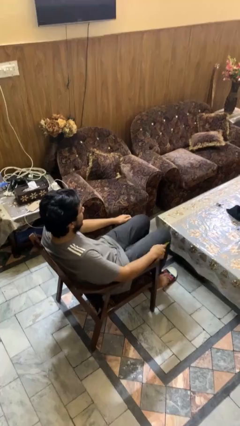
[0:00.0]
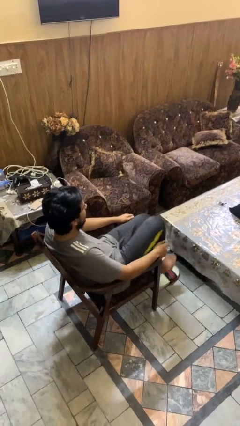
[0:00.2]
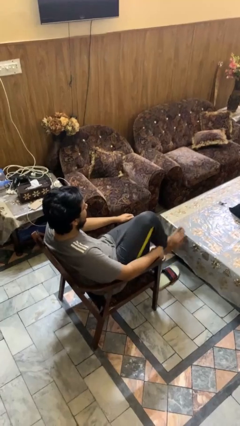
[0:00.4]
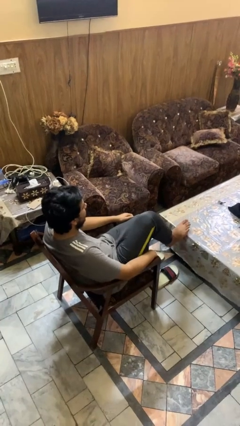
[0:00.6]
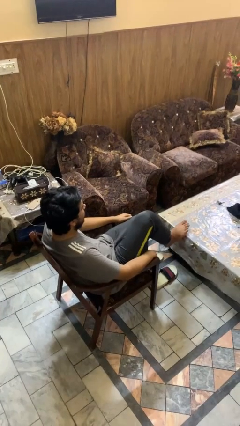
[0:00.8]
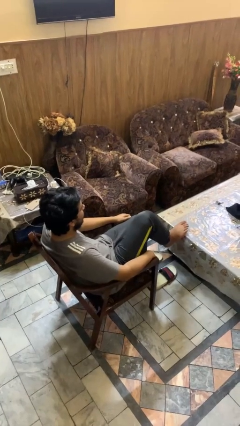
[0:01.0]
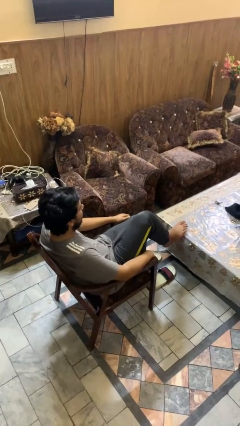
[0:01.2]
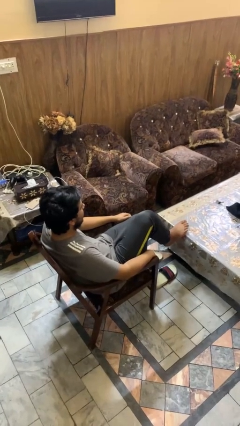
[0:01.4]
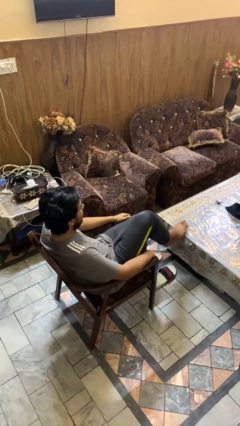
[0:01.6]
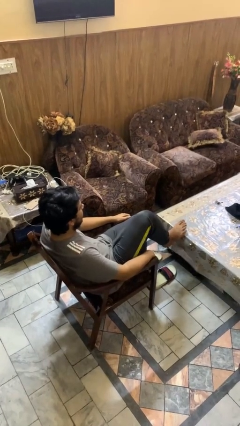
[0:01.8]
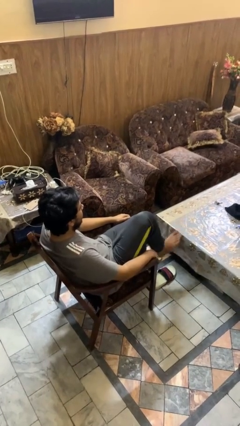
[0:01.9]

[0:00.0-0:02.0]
person puts feet up

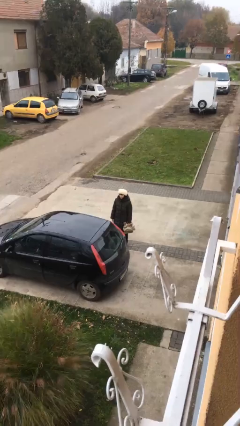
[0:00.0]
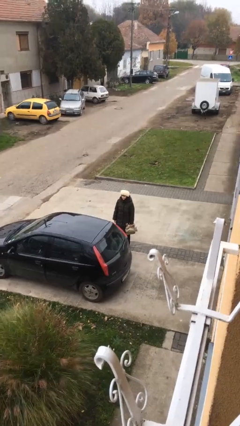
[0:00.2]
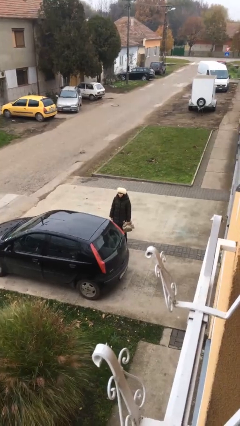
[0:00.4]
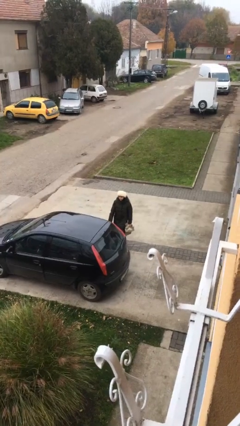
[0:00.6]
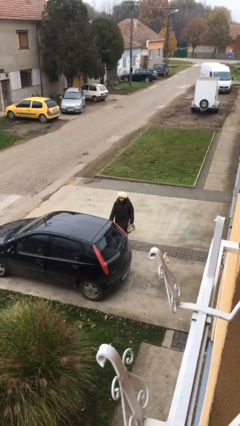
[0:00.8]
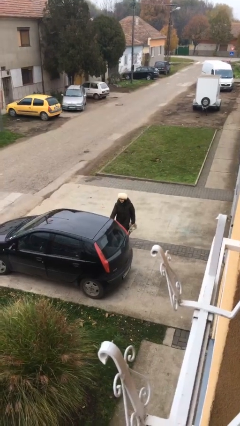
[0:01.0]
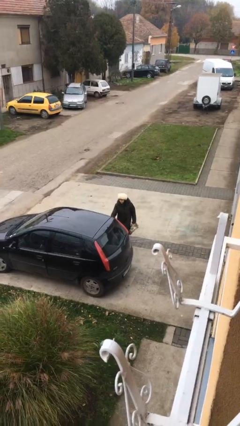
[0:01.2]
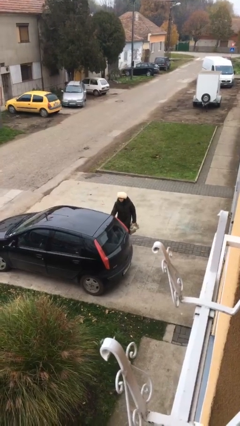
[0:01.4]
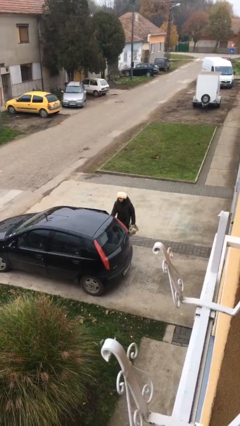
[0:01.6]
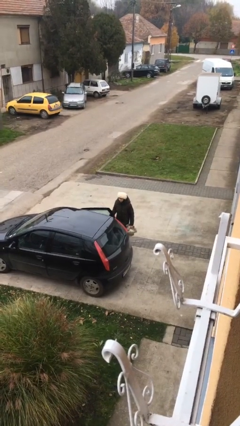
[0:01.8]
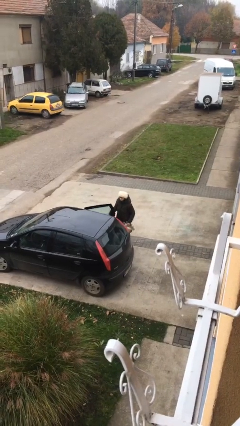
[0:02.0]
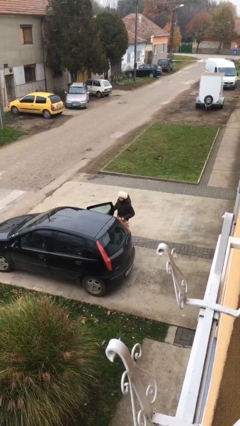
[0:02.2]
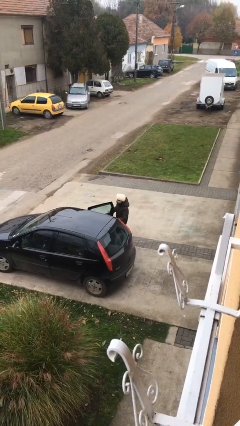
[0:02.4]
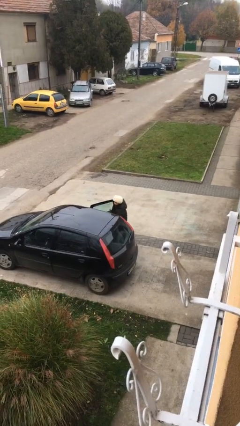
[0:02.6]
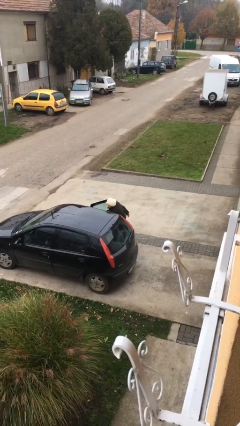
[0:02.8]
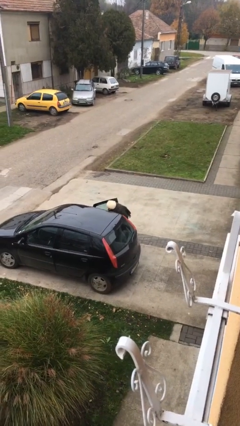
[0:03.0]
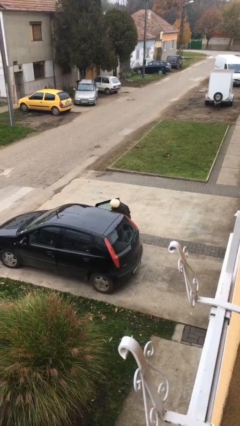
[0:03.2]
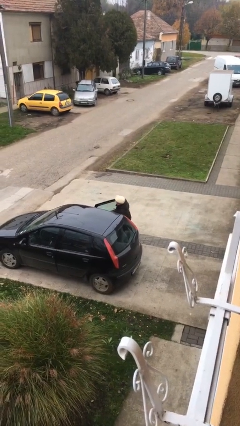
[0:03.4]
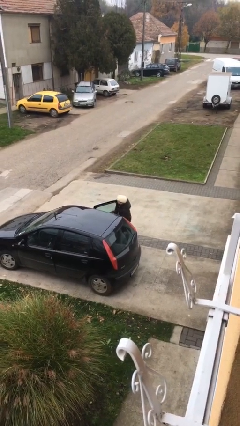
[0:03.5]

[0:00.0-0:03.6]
person loads car

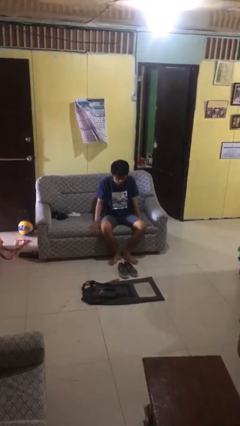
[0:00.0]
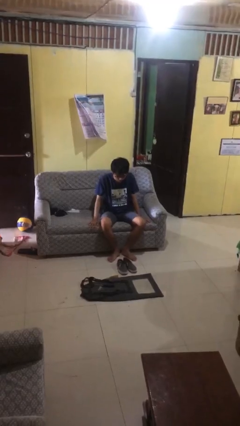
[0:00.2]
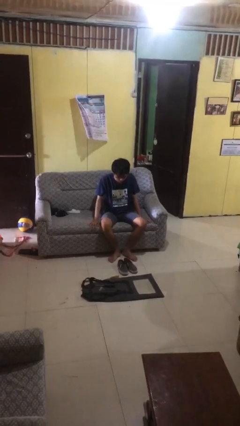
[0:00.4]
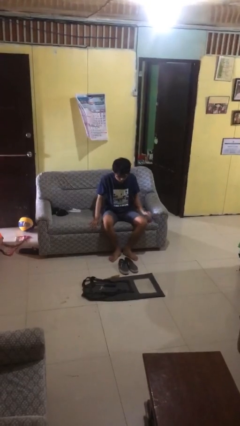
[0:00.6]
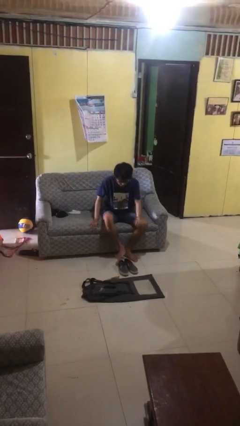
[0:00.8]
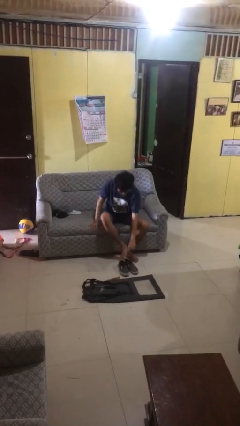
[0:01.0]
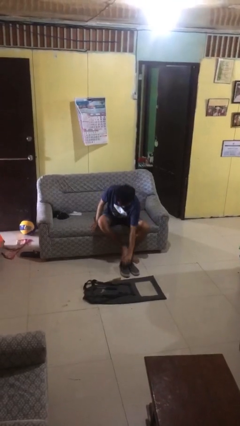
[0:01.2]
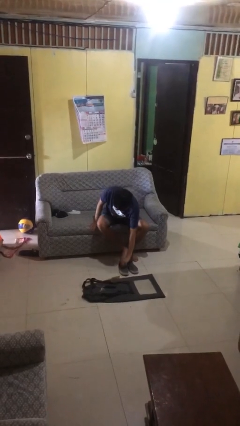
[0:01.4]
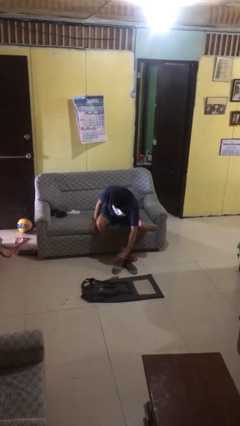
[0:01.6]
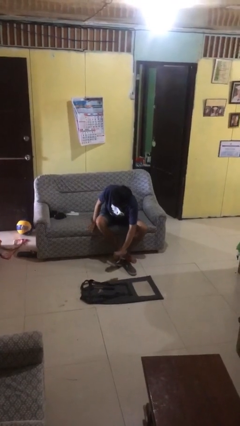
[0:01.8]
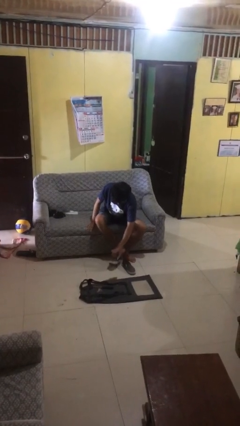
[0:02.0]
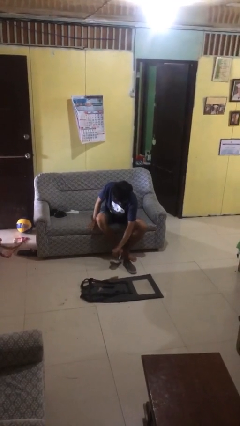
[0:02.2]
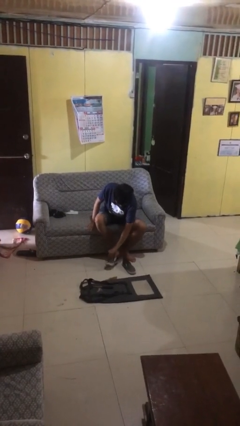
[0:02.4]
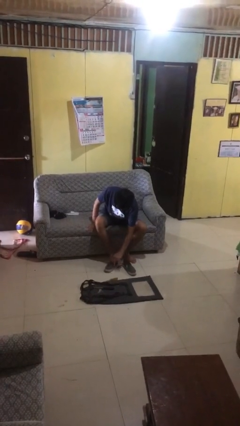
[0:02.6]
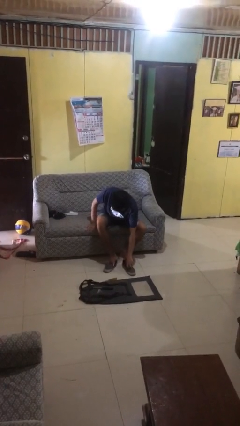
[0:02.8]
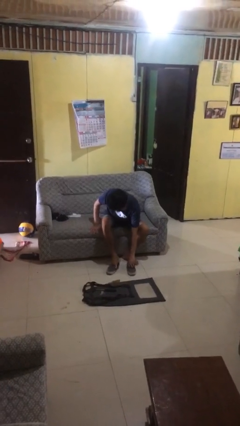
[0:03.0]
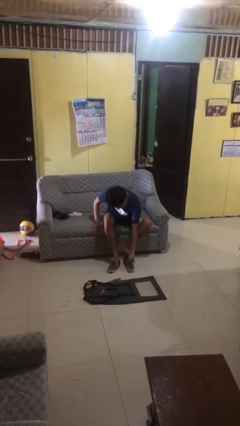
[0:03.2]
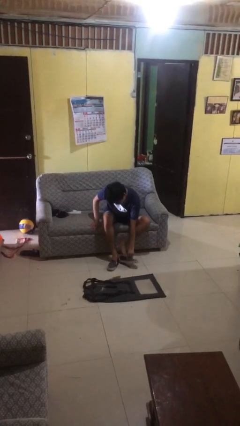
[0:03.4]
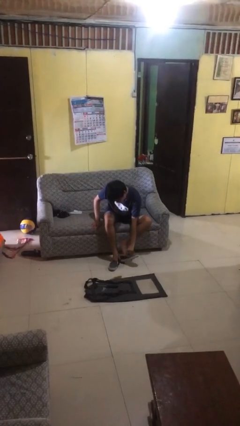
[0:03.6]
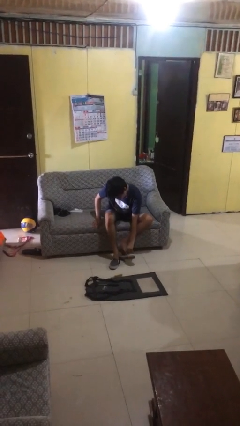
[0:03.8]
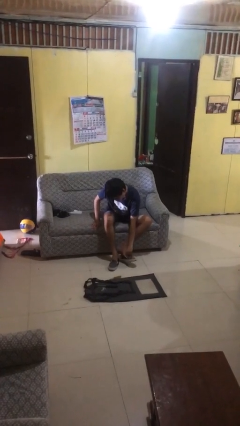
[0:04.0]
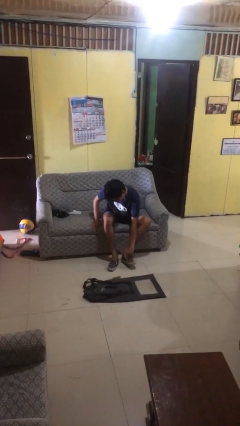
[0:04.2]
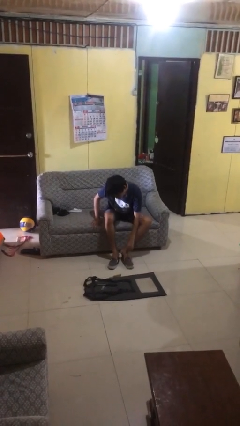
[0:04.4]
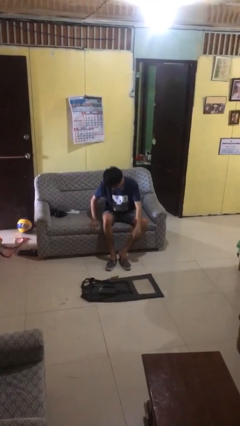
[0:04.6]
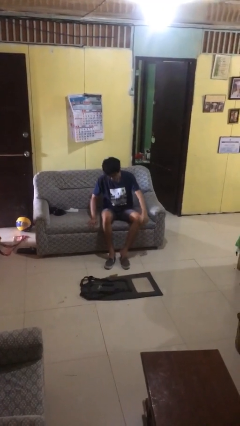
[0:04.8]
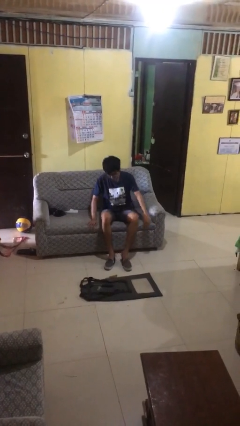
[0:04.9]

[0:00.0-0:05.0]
person puts on shoes

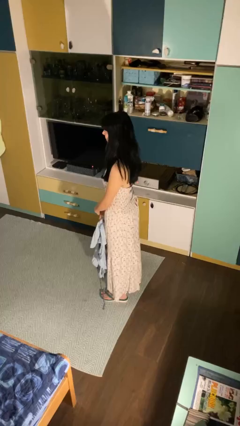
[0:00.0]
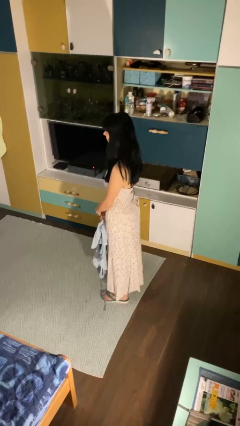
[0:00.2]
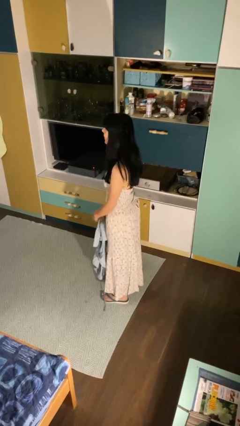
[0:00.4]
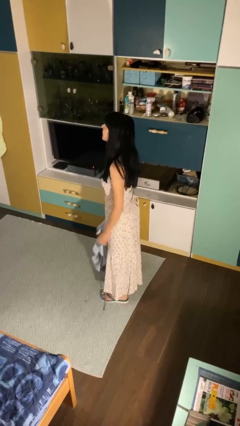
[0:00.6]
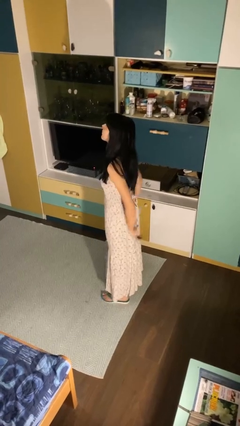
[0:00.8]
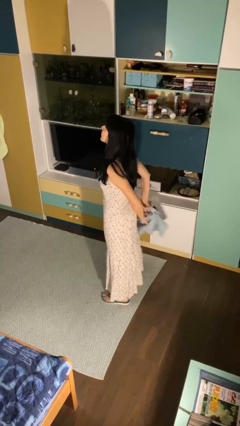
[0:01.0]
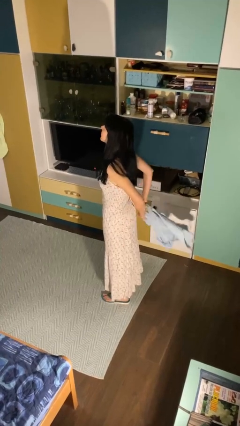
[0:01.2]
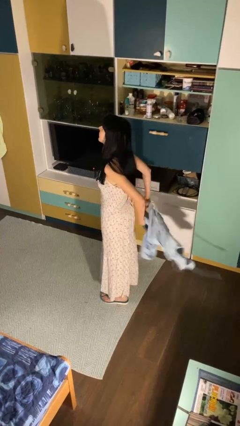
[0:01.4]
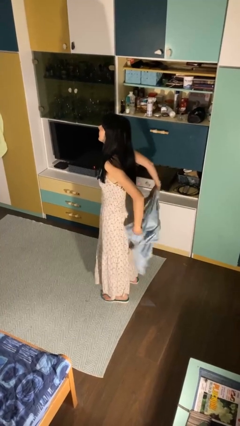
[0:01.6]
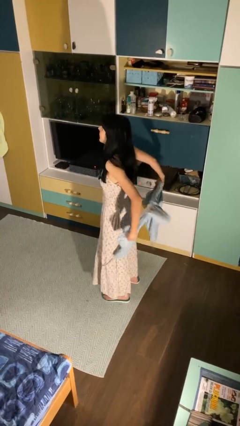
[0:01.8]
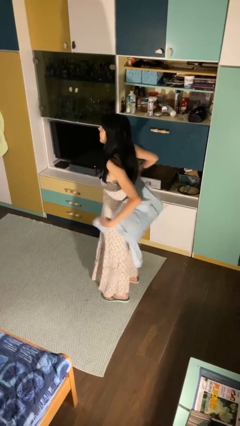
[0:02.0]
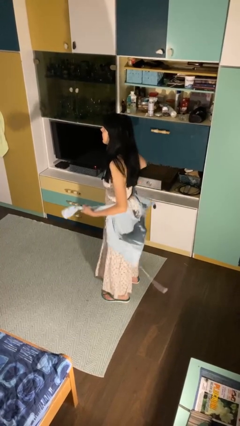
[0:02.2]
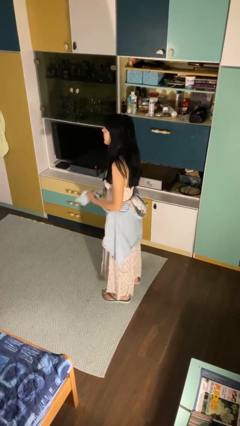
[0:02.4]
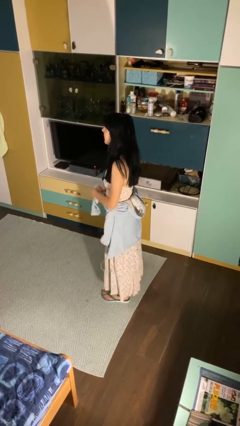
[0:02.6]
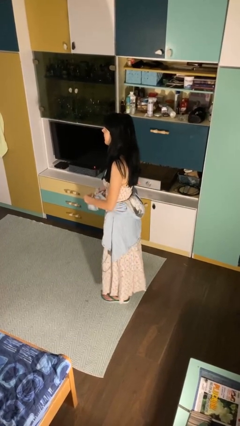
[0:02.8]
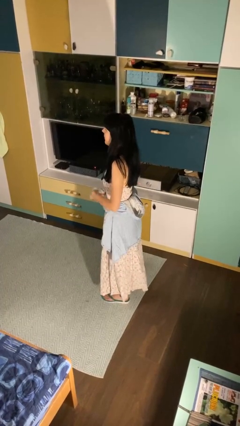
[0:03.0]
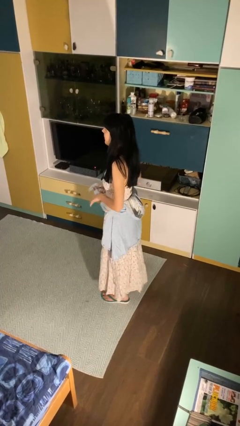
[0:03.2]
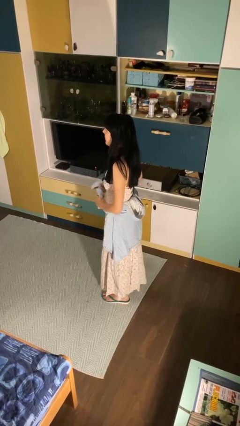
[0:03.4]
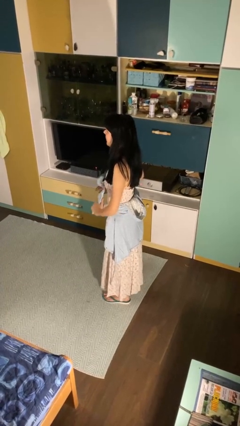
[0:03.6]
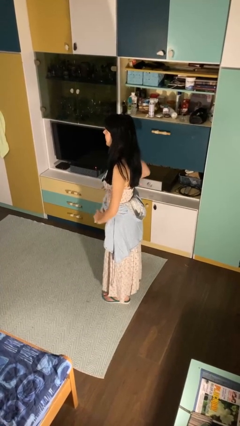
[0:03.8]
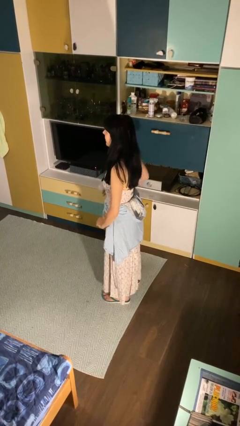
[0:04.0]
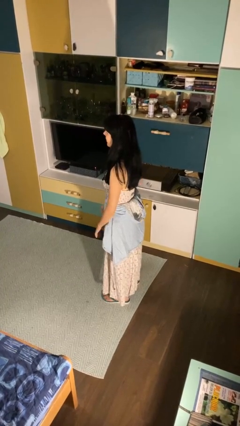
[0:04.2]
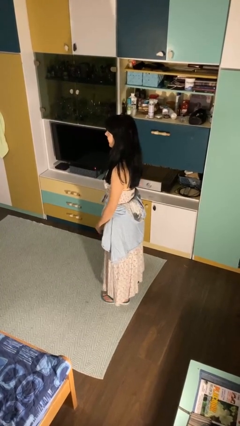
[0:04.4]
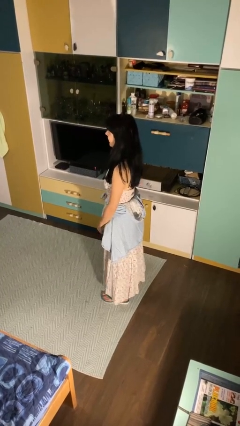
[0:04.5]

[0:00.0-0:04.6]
person ties jacket around waist

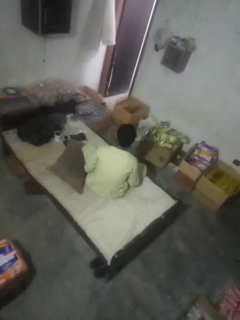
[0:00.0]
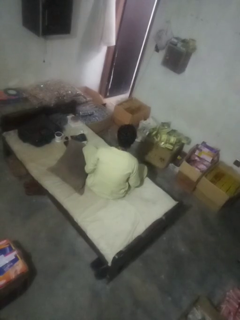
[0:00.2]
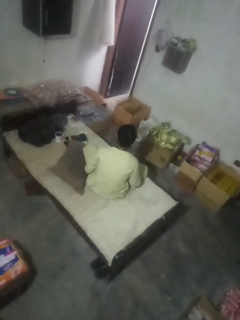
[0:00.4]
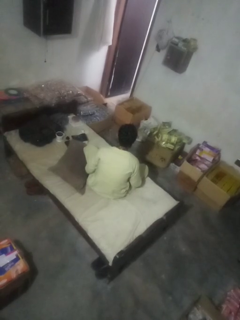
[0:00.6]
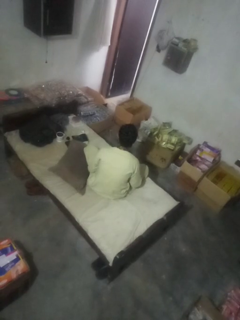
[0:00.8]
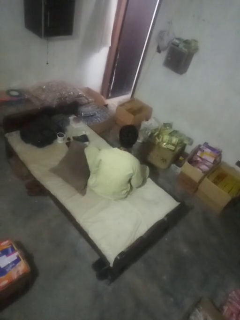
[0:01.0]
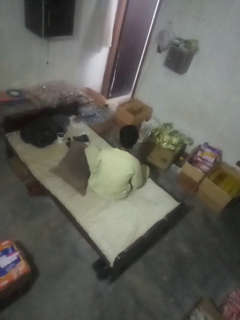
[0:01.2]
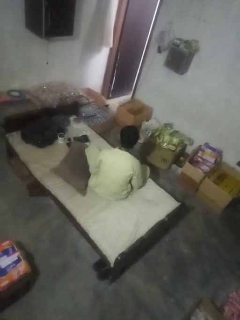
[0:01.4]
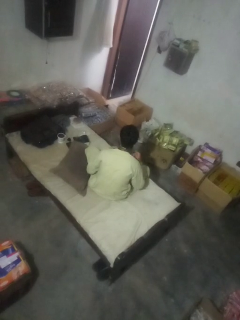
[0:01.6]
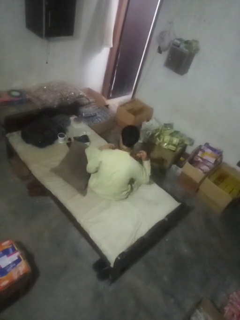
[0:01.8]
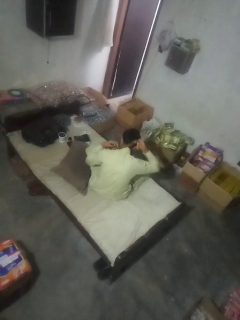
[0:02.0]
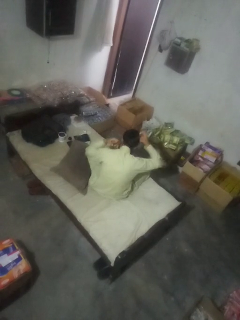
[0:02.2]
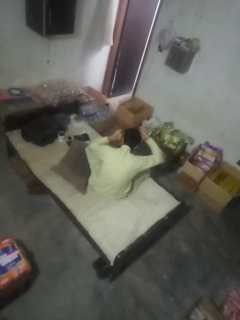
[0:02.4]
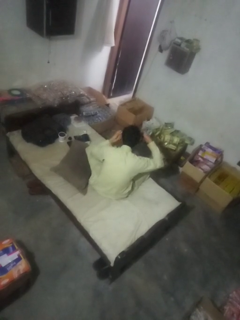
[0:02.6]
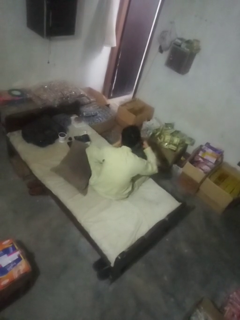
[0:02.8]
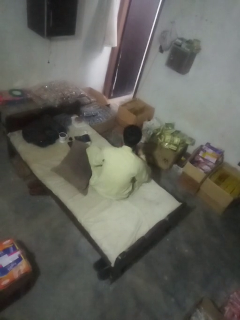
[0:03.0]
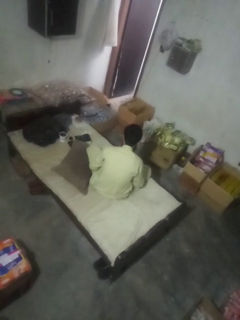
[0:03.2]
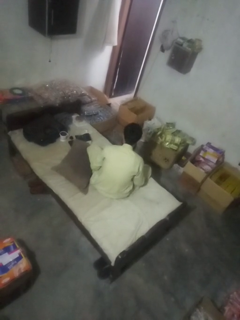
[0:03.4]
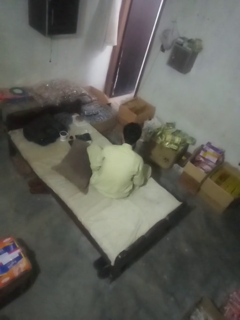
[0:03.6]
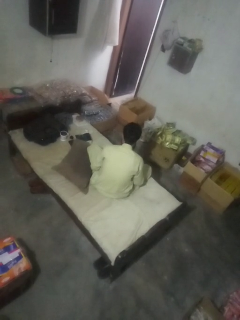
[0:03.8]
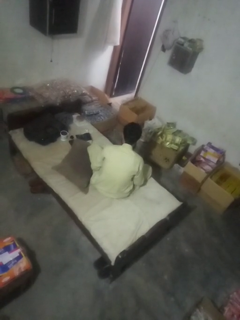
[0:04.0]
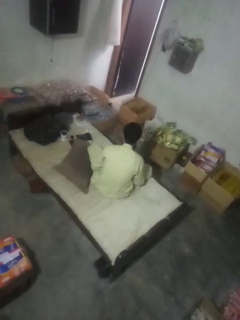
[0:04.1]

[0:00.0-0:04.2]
person takes off necktie
